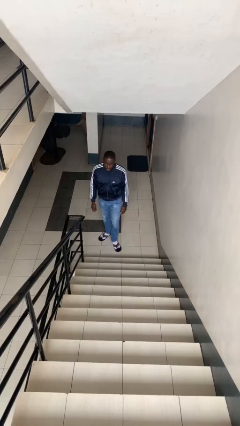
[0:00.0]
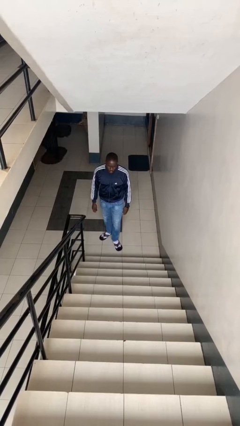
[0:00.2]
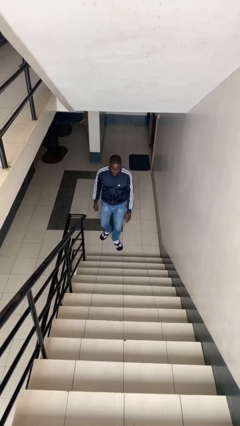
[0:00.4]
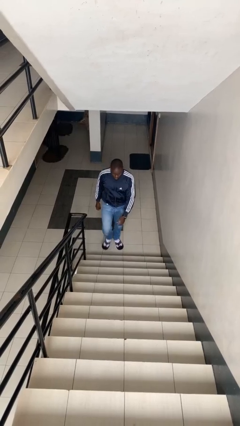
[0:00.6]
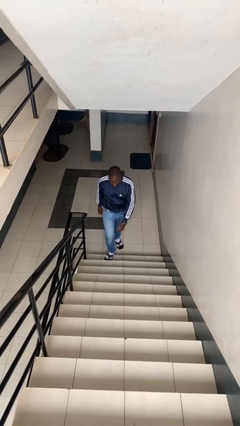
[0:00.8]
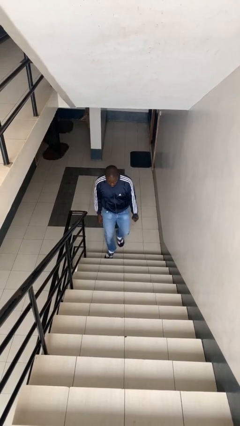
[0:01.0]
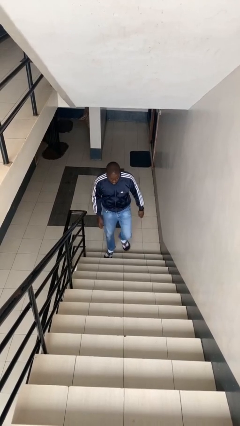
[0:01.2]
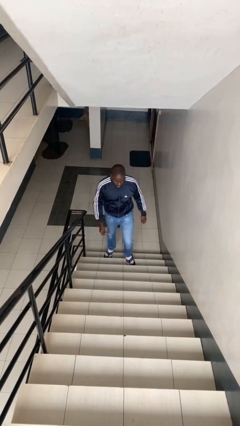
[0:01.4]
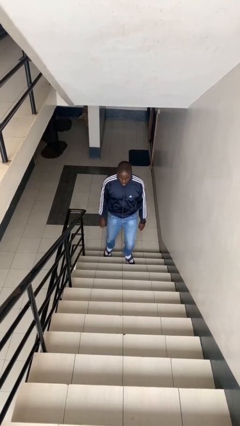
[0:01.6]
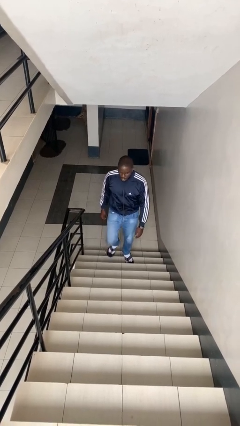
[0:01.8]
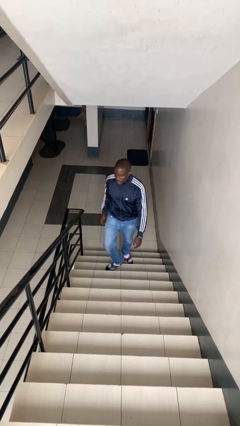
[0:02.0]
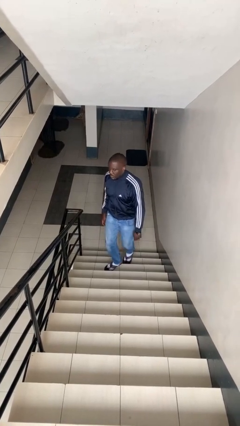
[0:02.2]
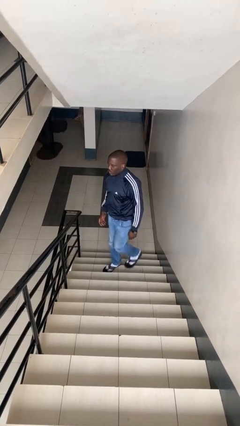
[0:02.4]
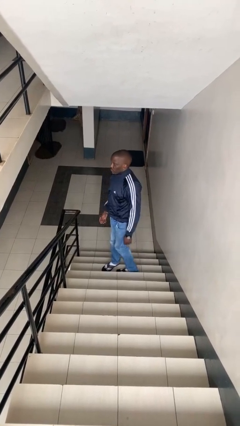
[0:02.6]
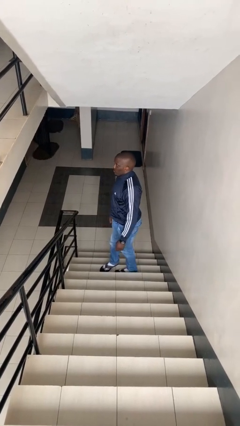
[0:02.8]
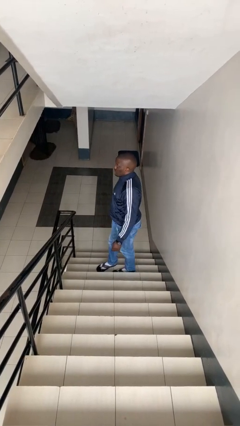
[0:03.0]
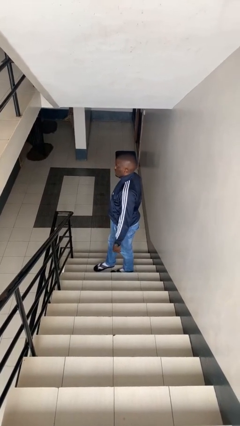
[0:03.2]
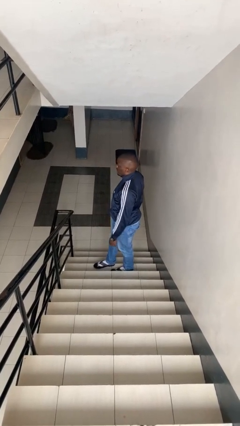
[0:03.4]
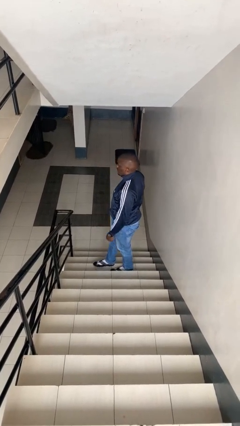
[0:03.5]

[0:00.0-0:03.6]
person climbs up stairs

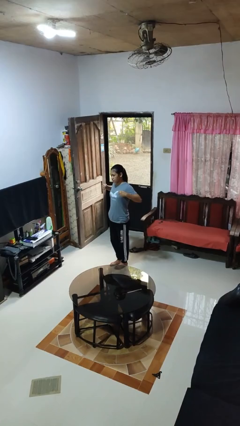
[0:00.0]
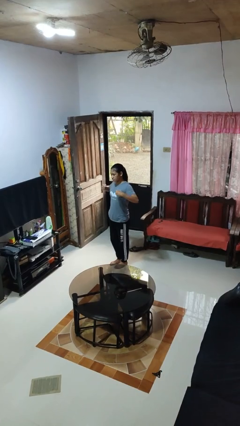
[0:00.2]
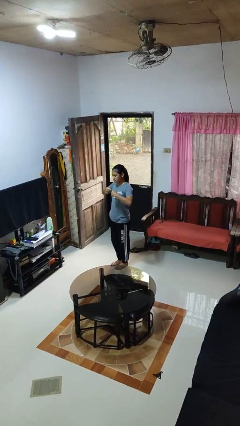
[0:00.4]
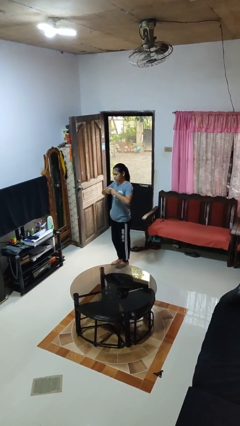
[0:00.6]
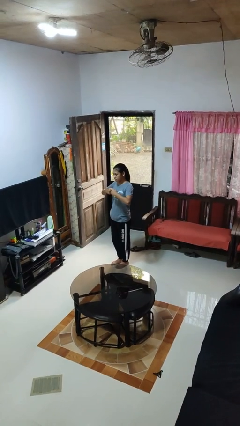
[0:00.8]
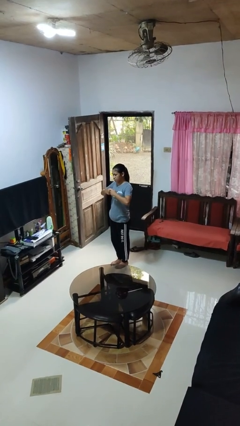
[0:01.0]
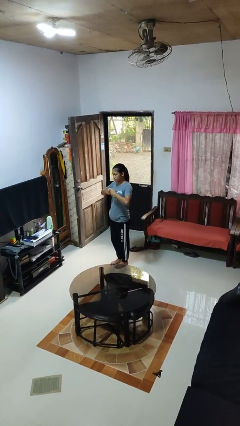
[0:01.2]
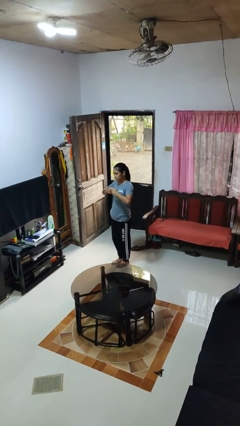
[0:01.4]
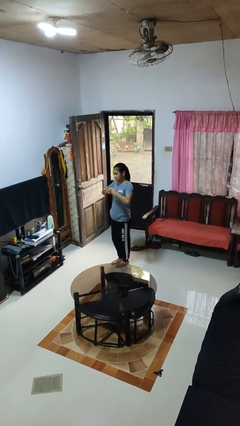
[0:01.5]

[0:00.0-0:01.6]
person gestures zoom out

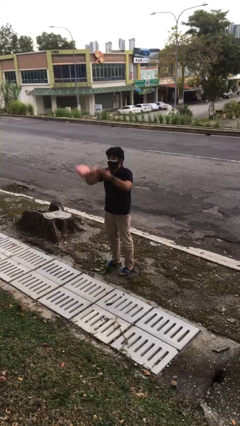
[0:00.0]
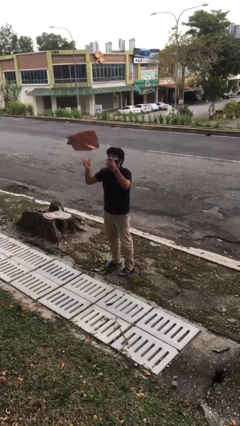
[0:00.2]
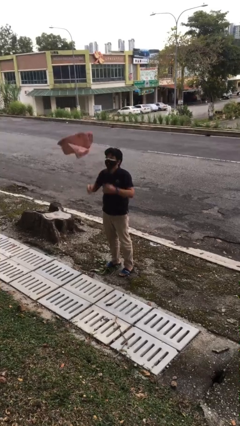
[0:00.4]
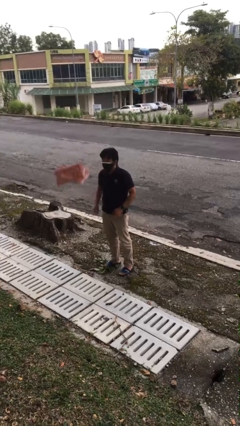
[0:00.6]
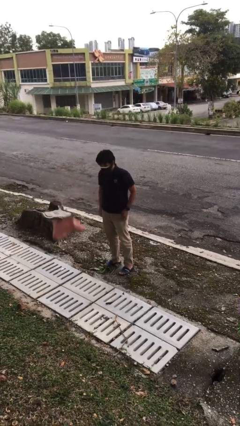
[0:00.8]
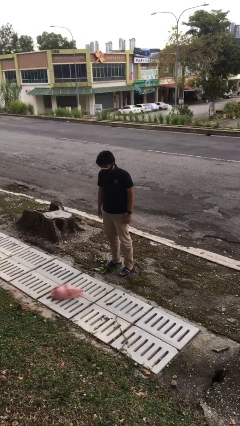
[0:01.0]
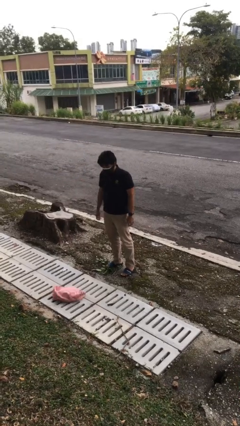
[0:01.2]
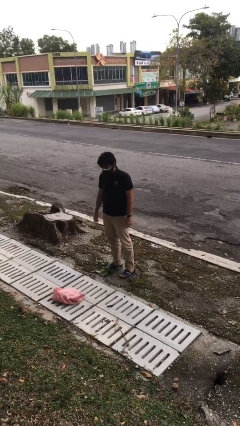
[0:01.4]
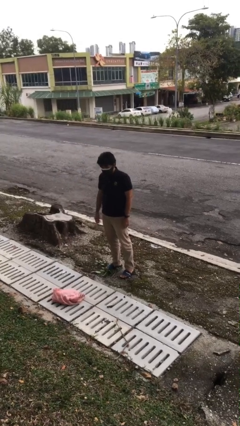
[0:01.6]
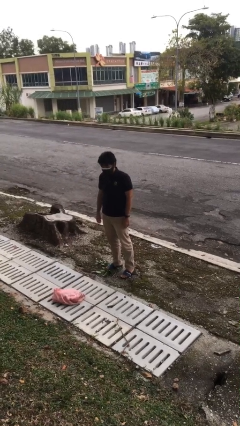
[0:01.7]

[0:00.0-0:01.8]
person throws object into air

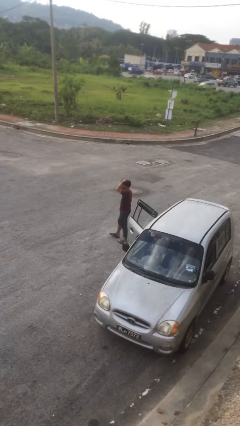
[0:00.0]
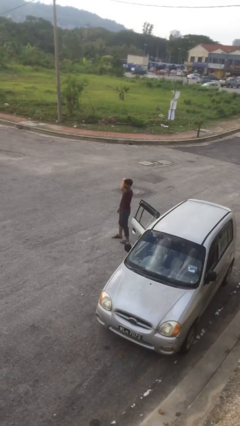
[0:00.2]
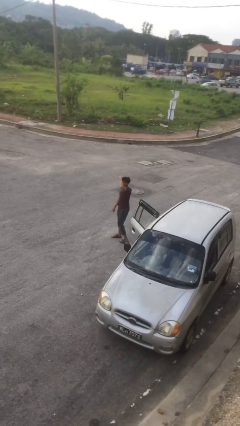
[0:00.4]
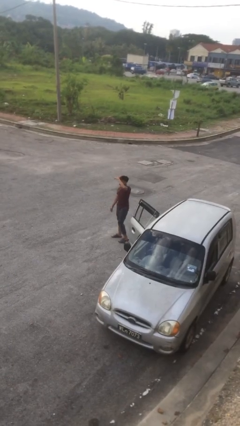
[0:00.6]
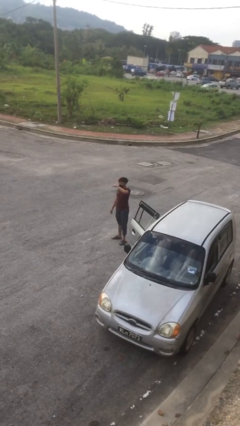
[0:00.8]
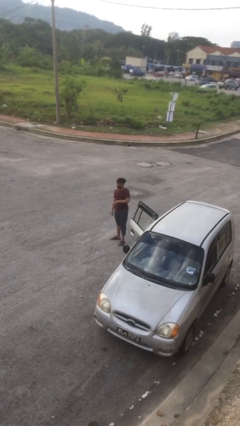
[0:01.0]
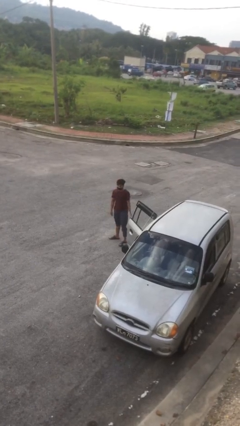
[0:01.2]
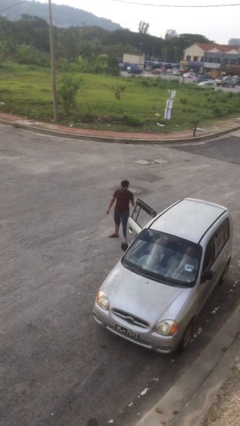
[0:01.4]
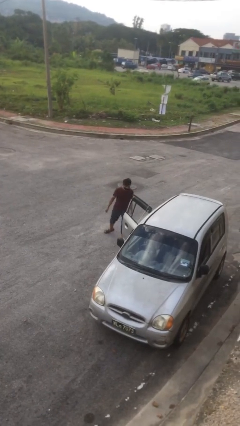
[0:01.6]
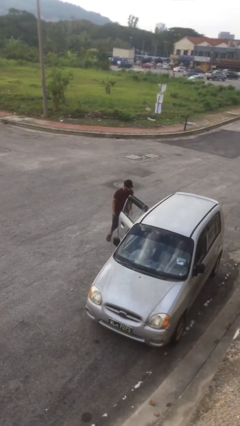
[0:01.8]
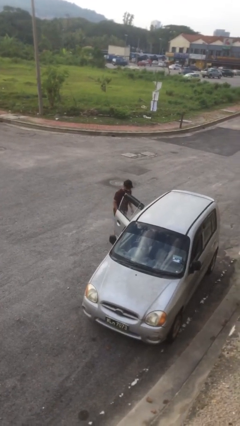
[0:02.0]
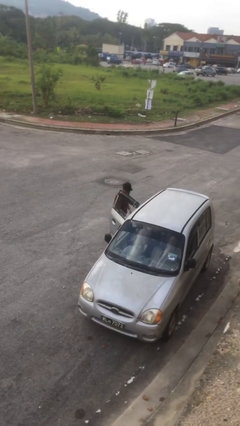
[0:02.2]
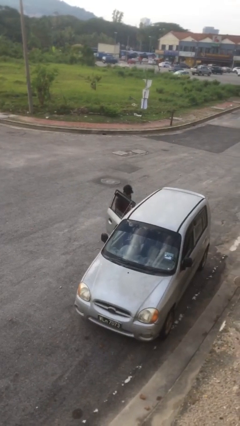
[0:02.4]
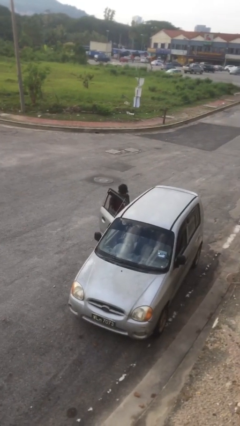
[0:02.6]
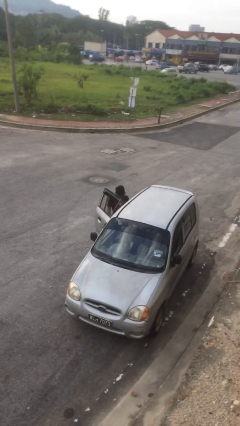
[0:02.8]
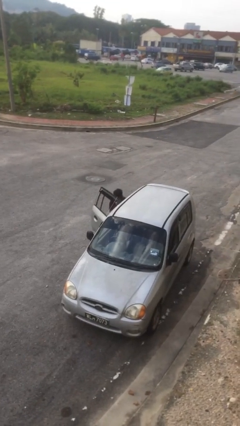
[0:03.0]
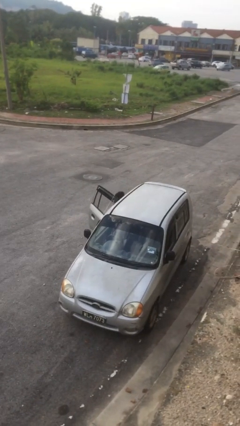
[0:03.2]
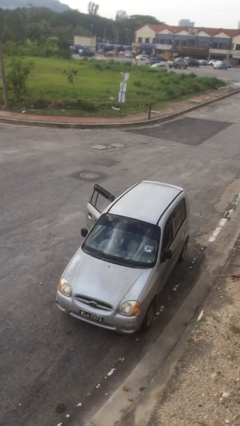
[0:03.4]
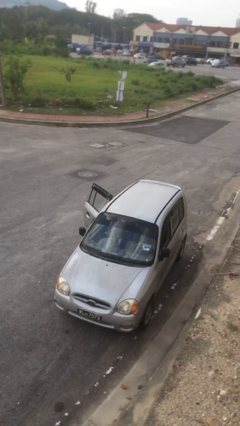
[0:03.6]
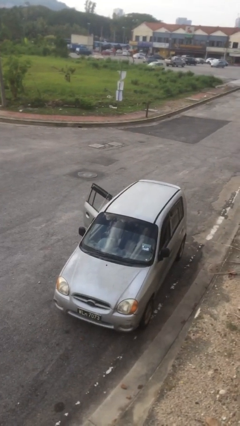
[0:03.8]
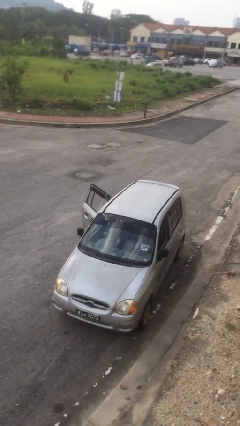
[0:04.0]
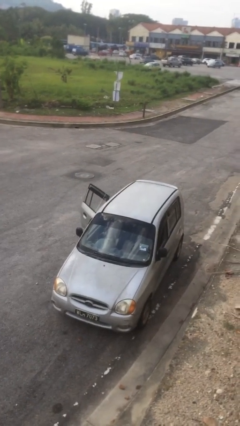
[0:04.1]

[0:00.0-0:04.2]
person enters car

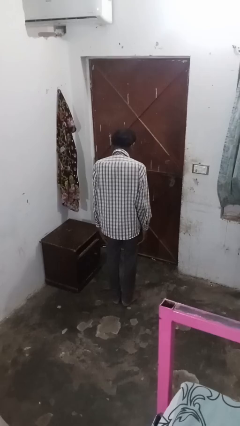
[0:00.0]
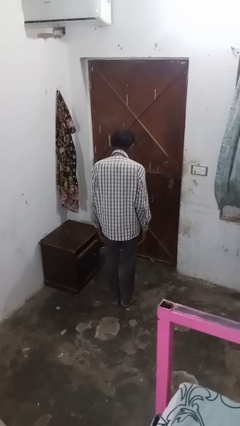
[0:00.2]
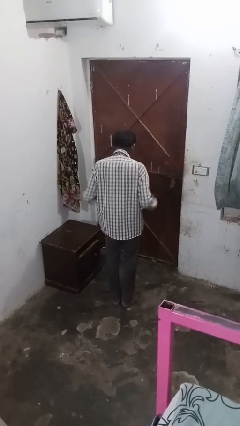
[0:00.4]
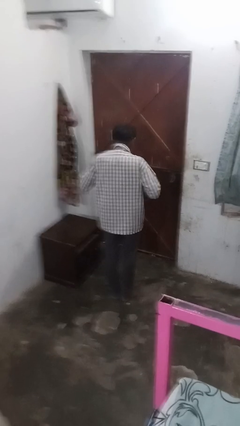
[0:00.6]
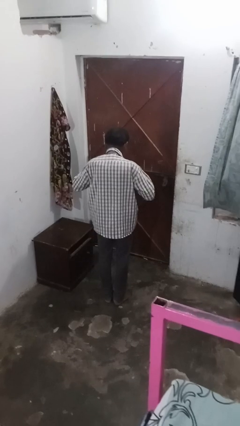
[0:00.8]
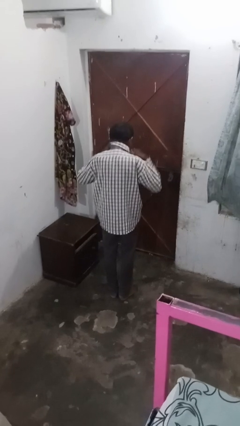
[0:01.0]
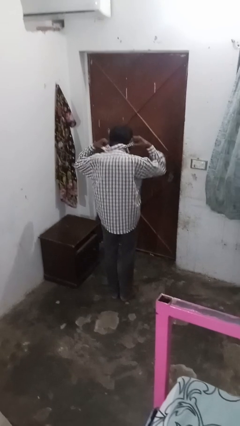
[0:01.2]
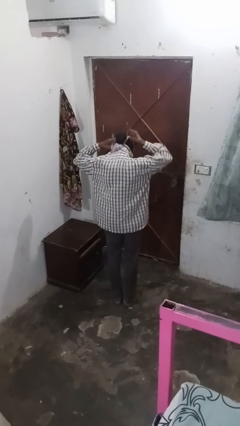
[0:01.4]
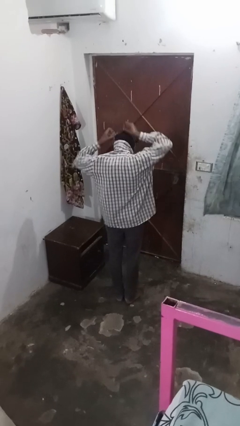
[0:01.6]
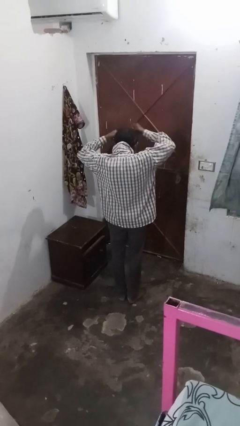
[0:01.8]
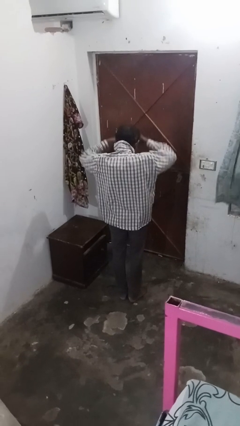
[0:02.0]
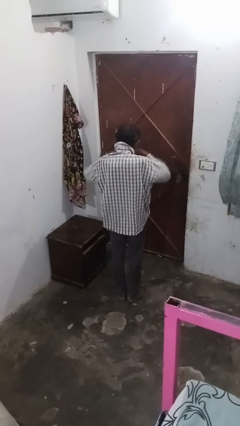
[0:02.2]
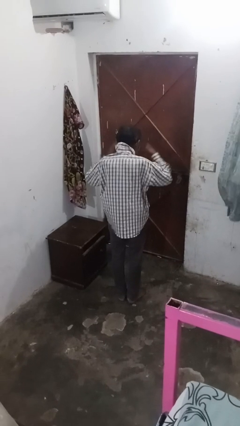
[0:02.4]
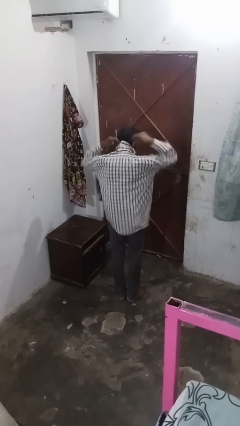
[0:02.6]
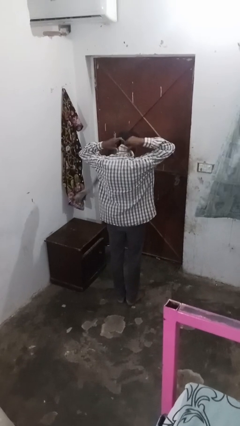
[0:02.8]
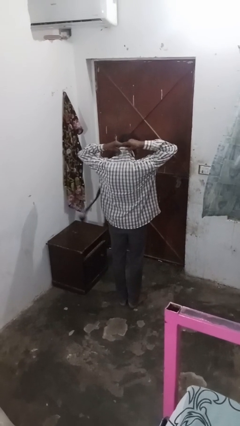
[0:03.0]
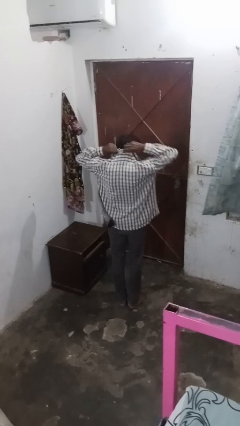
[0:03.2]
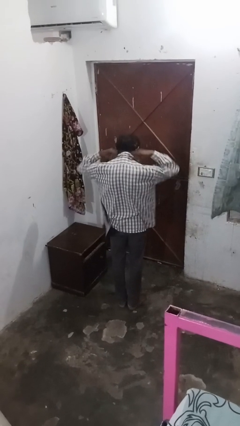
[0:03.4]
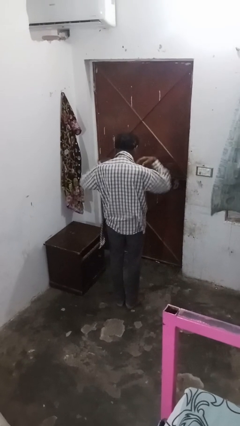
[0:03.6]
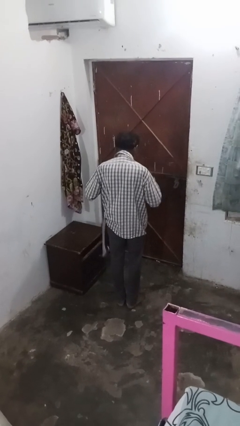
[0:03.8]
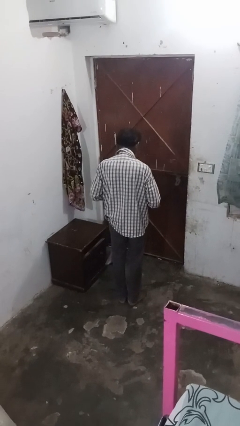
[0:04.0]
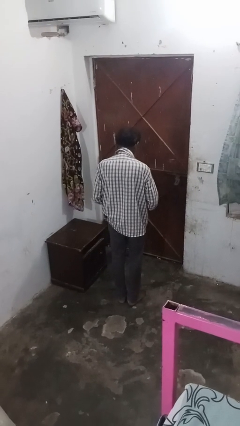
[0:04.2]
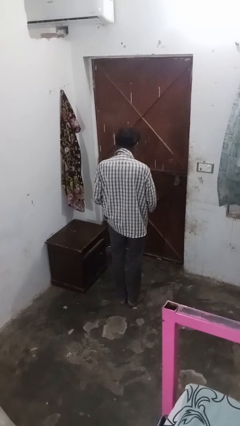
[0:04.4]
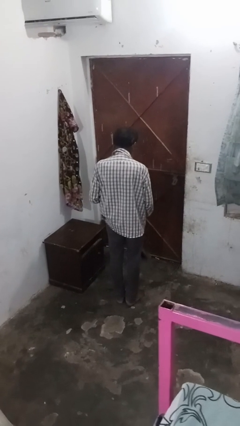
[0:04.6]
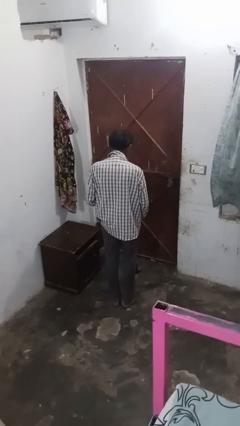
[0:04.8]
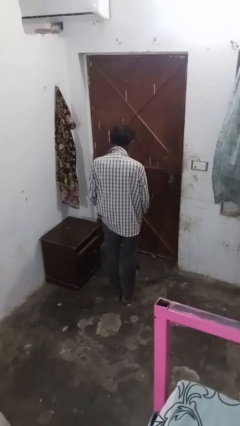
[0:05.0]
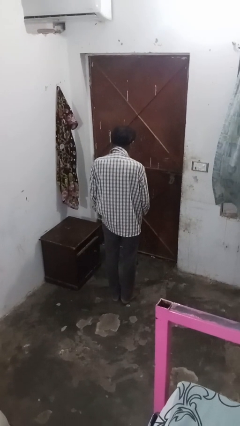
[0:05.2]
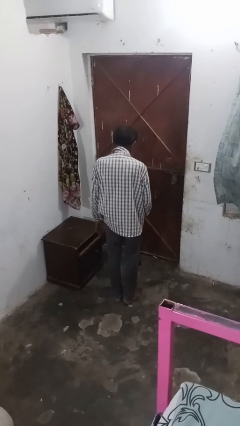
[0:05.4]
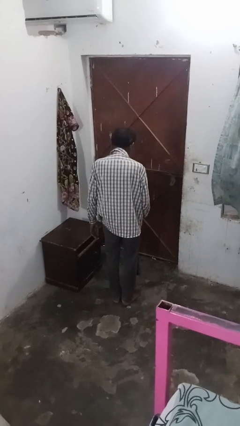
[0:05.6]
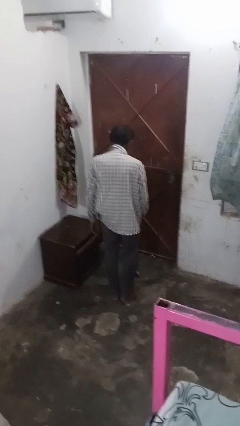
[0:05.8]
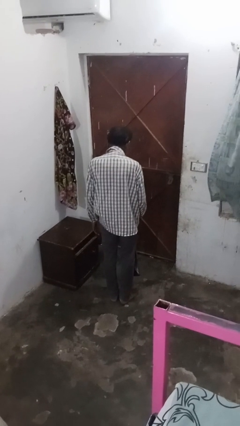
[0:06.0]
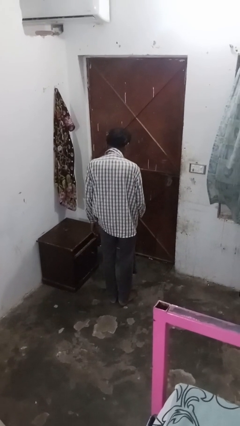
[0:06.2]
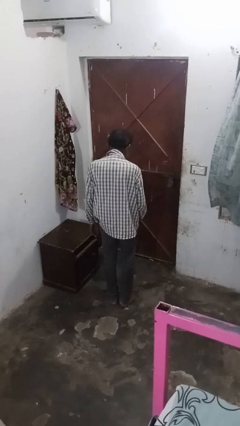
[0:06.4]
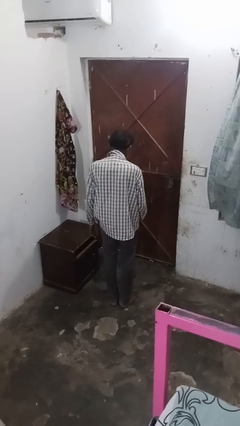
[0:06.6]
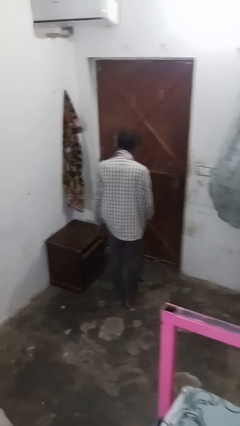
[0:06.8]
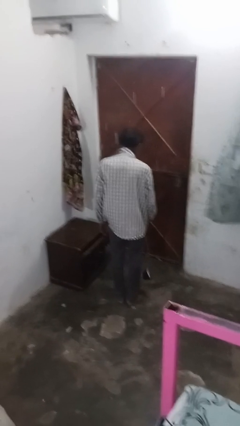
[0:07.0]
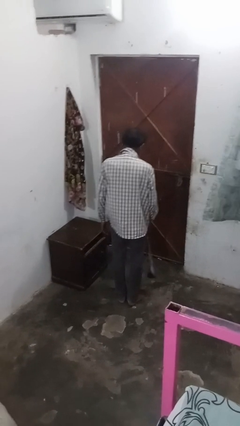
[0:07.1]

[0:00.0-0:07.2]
person takes off necktie
